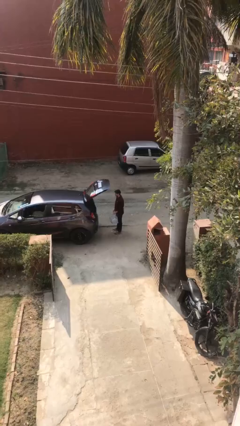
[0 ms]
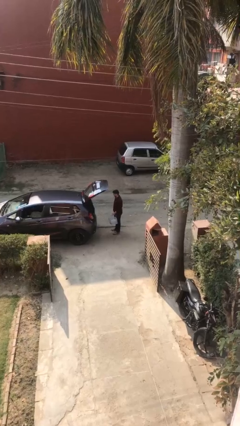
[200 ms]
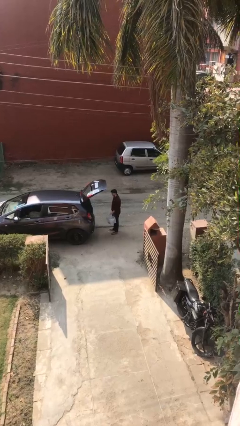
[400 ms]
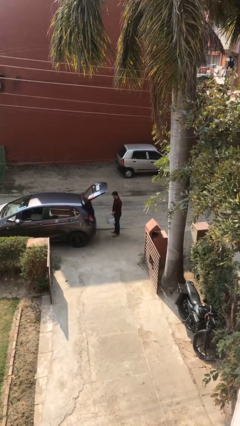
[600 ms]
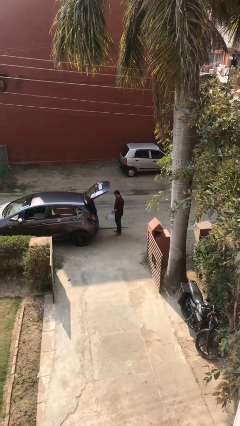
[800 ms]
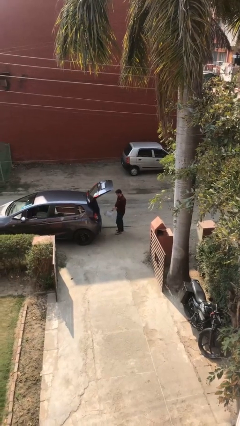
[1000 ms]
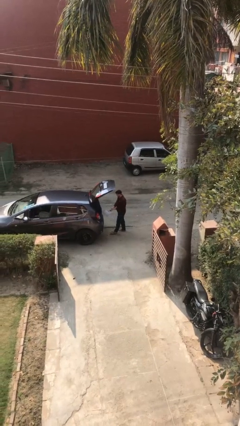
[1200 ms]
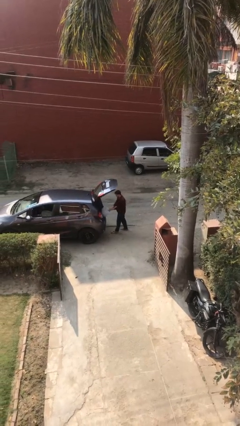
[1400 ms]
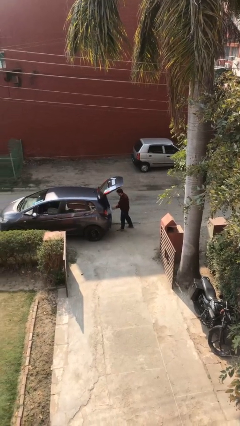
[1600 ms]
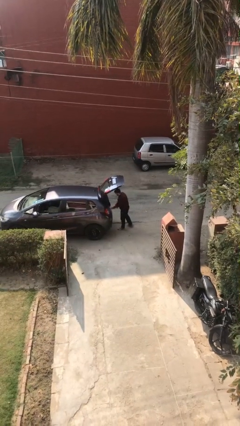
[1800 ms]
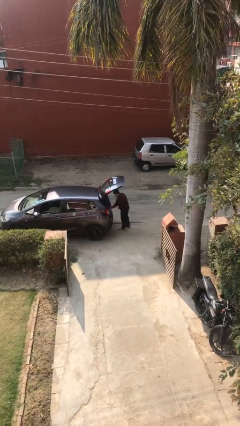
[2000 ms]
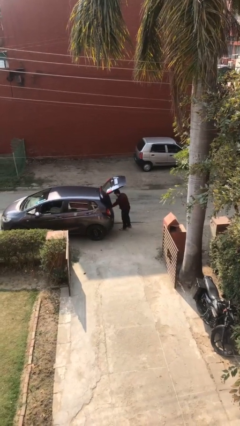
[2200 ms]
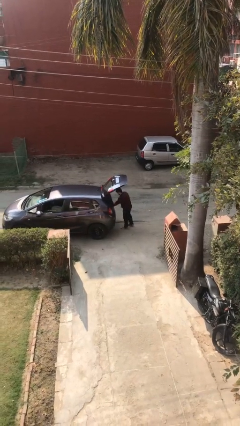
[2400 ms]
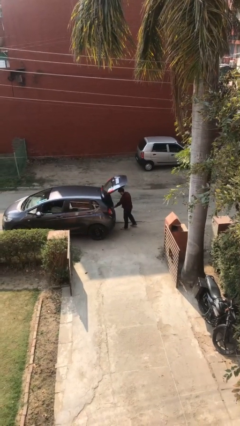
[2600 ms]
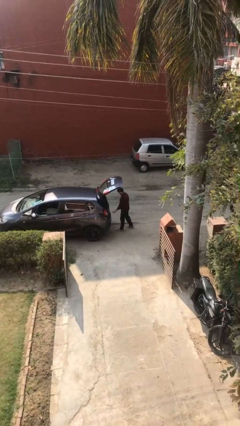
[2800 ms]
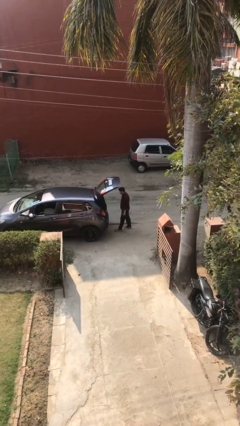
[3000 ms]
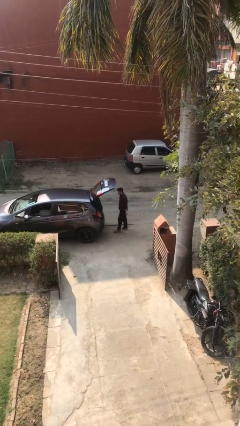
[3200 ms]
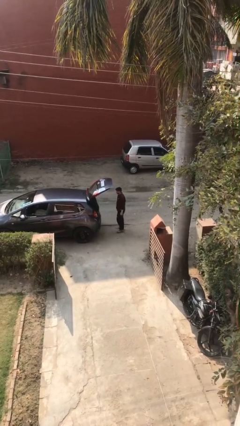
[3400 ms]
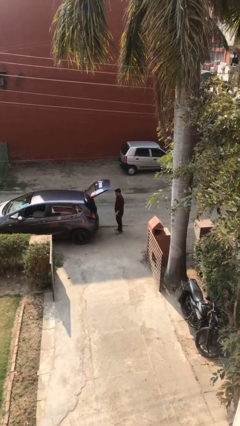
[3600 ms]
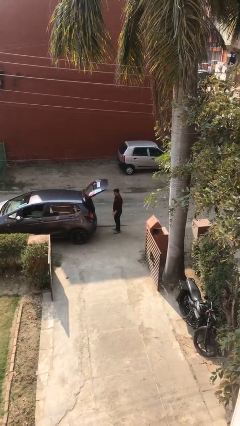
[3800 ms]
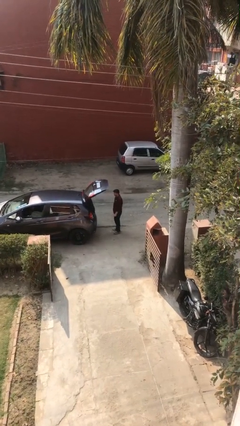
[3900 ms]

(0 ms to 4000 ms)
person loads car

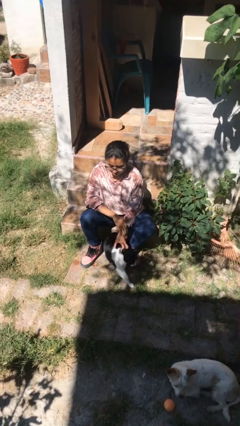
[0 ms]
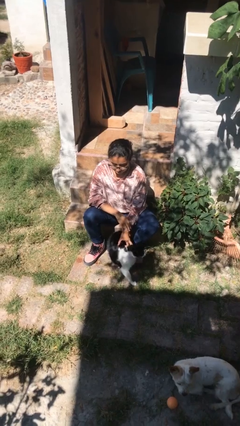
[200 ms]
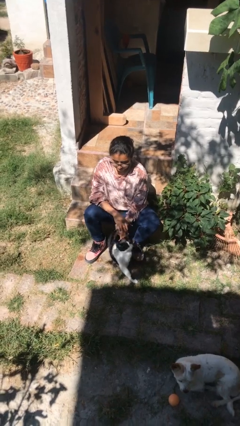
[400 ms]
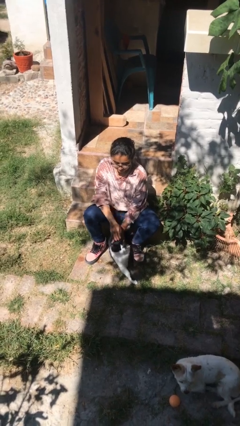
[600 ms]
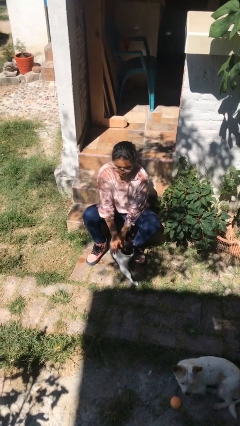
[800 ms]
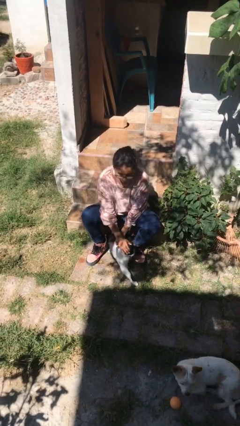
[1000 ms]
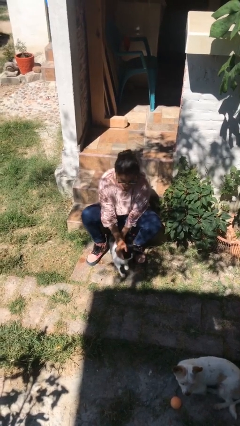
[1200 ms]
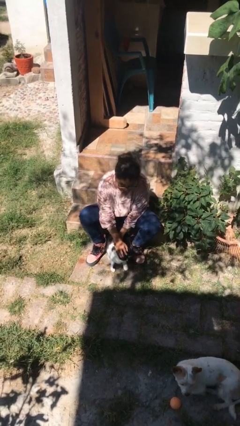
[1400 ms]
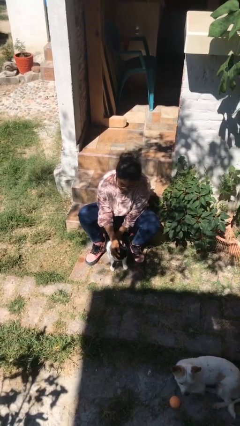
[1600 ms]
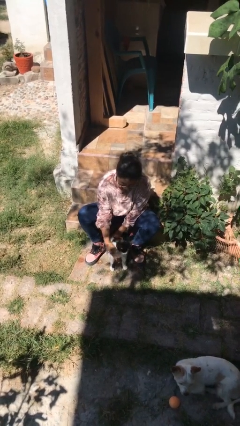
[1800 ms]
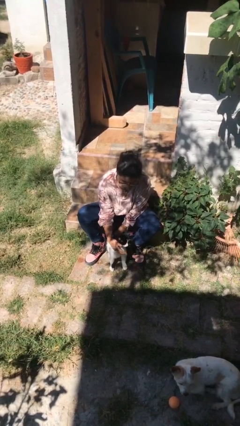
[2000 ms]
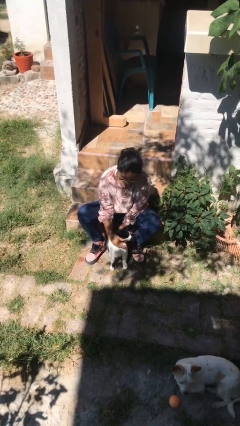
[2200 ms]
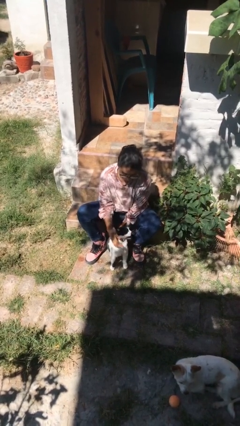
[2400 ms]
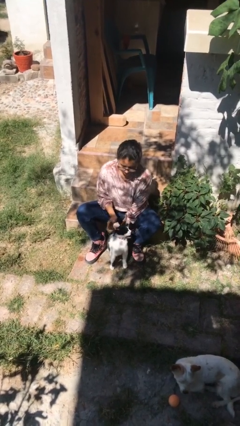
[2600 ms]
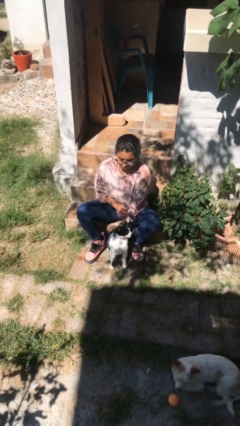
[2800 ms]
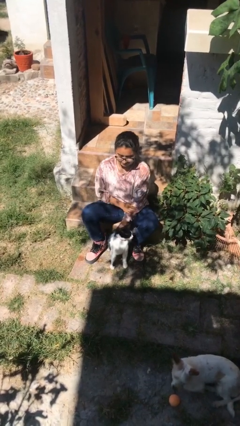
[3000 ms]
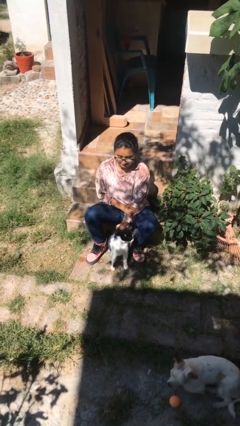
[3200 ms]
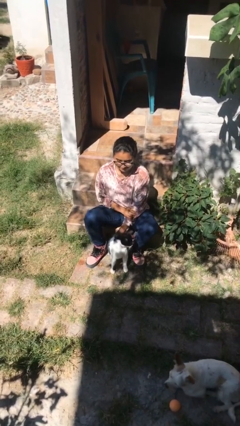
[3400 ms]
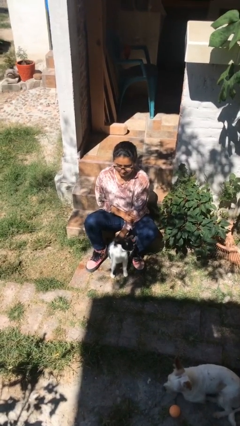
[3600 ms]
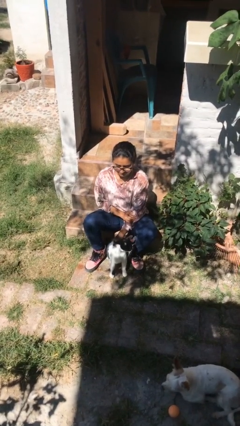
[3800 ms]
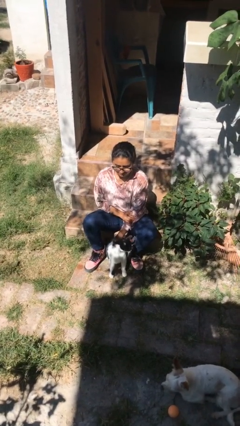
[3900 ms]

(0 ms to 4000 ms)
person pets cat

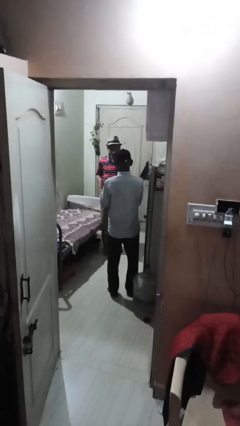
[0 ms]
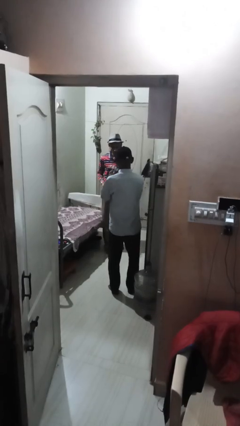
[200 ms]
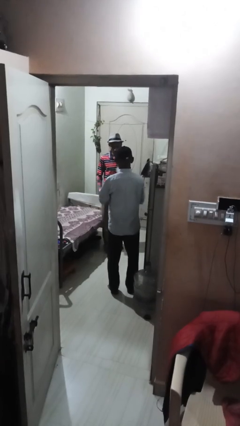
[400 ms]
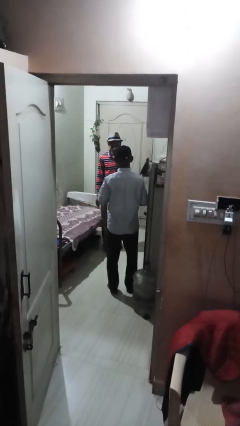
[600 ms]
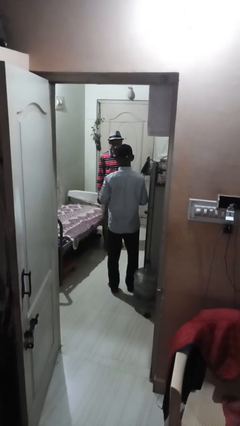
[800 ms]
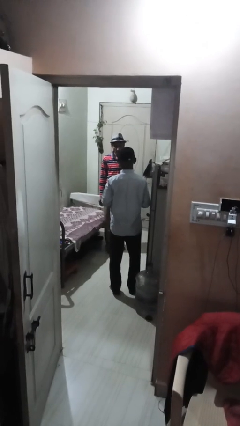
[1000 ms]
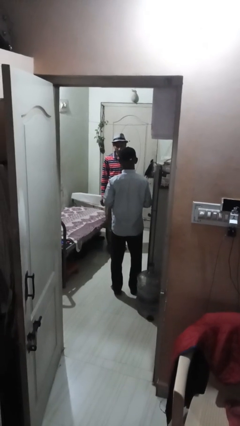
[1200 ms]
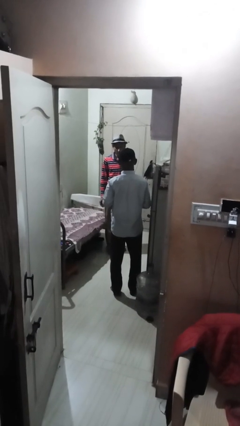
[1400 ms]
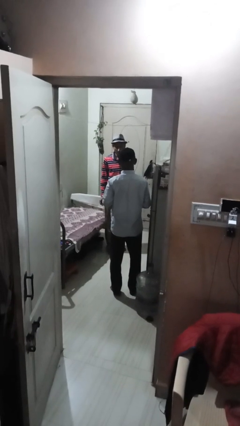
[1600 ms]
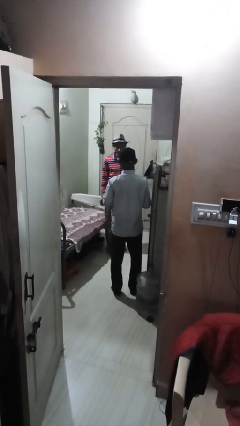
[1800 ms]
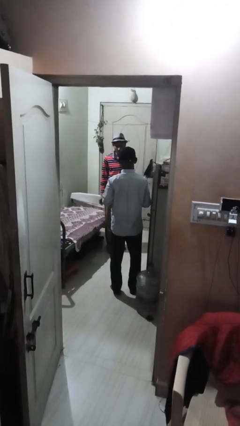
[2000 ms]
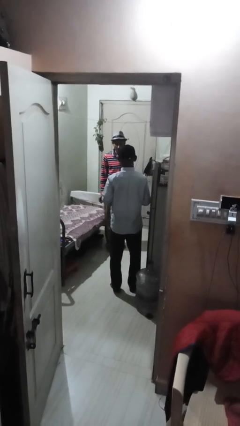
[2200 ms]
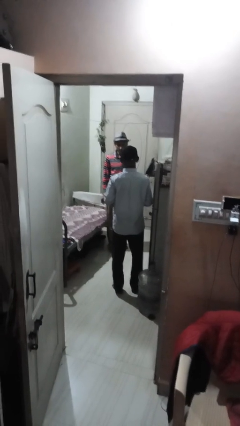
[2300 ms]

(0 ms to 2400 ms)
person catches object from person

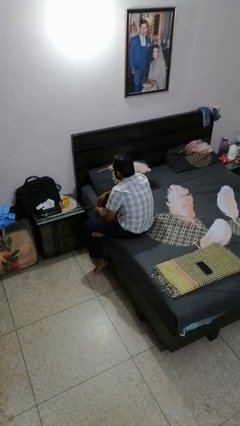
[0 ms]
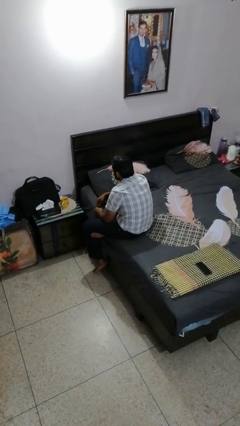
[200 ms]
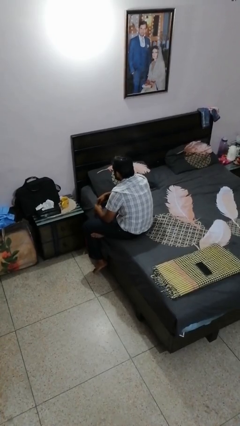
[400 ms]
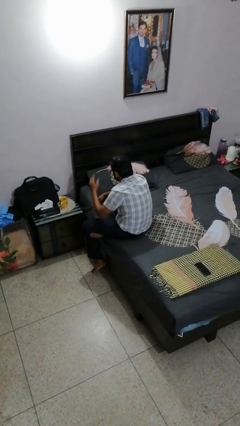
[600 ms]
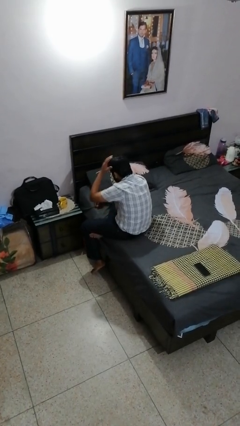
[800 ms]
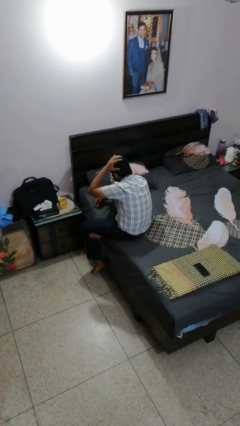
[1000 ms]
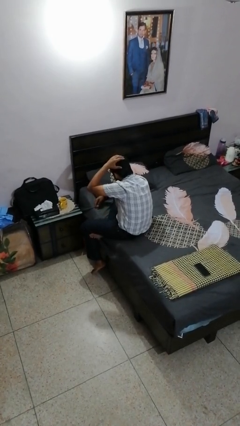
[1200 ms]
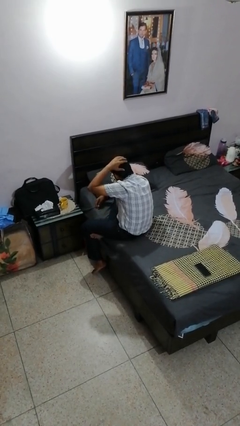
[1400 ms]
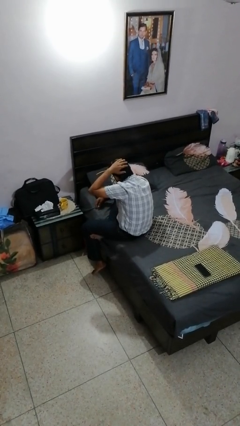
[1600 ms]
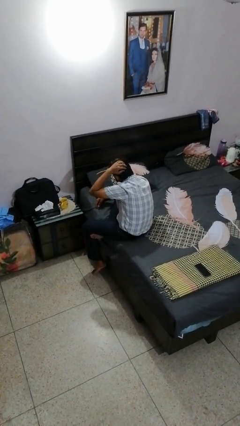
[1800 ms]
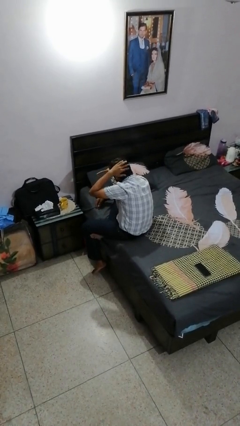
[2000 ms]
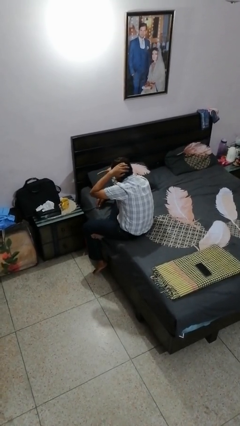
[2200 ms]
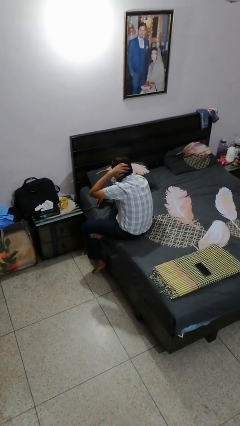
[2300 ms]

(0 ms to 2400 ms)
person strokes hair

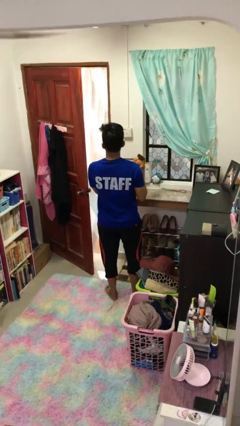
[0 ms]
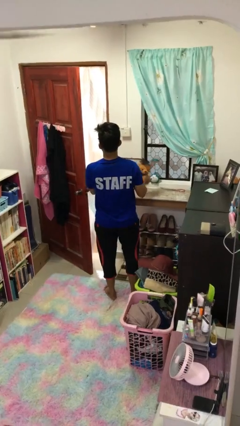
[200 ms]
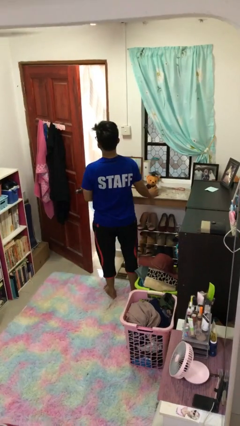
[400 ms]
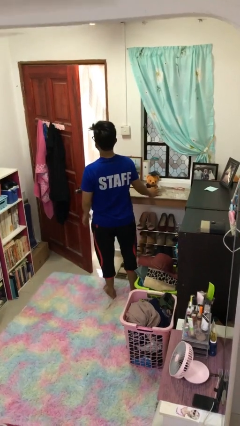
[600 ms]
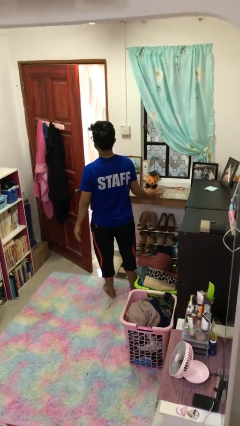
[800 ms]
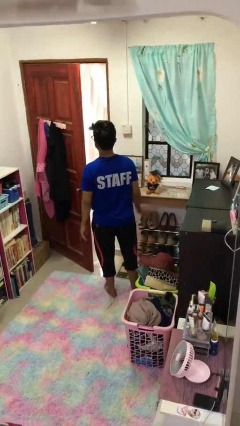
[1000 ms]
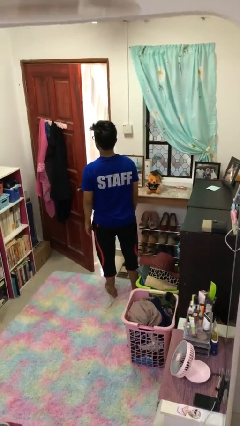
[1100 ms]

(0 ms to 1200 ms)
person puts down object on countertop

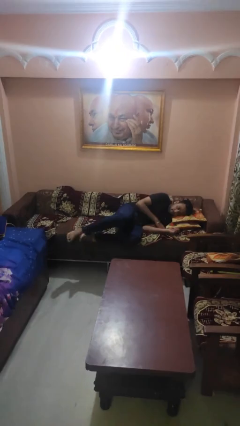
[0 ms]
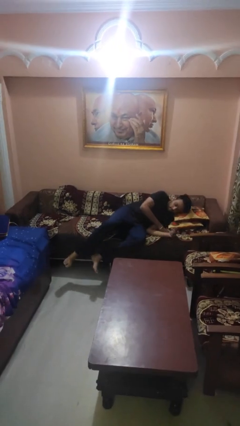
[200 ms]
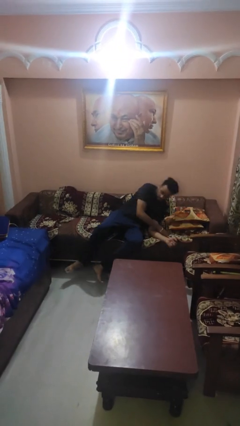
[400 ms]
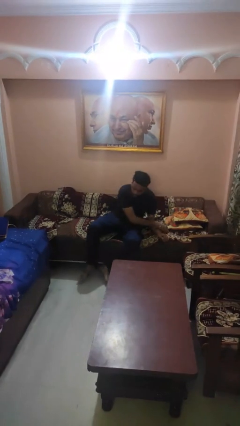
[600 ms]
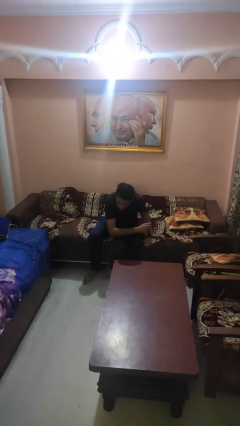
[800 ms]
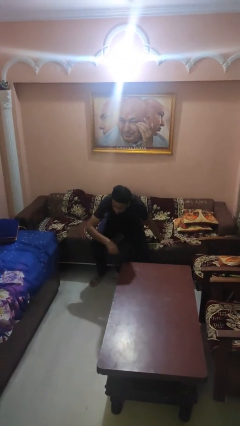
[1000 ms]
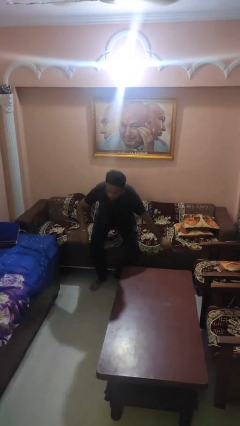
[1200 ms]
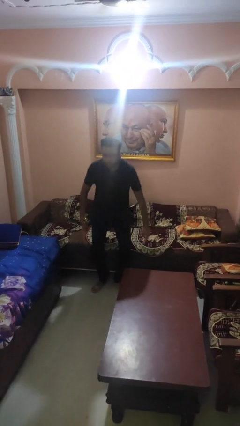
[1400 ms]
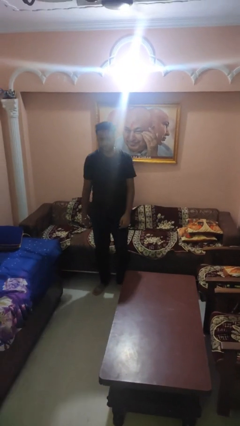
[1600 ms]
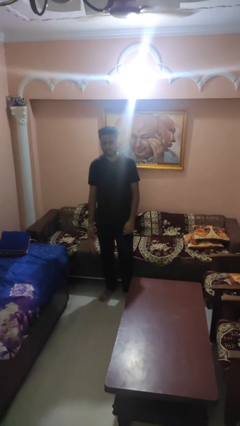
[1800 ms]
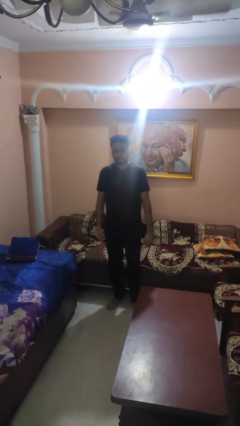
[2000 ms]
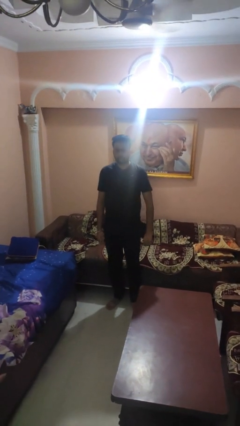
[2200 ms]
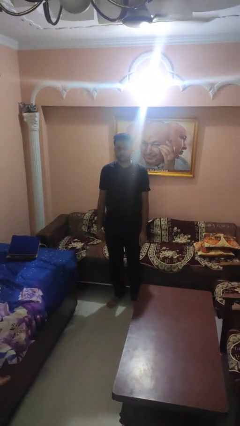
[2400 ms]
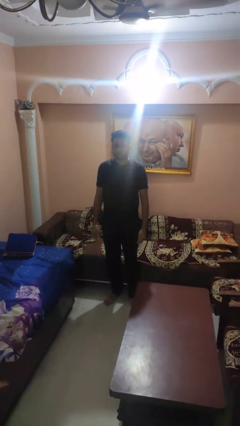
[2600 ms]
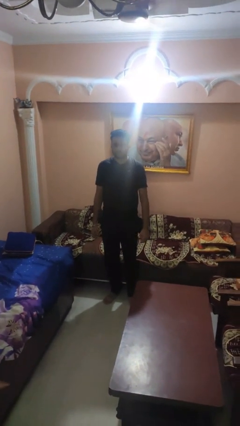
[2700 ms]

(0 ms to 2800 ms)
person stands up

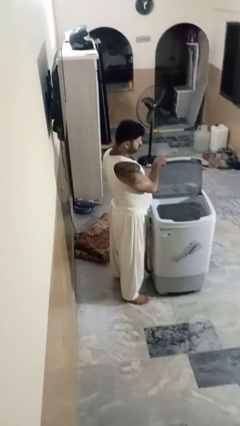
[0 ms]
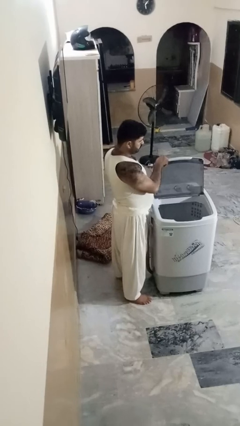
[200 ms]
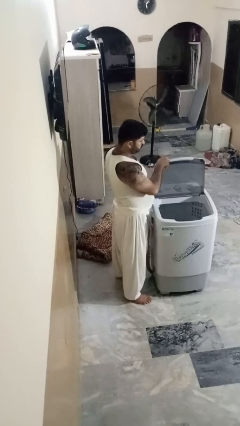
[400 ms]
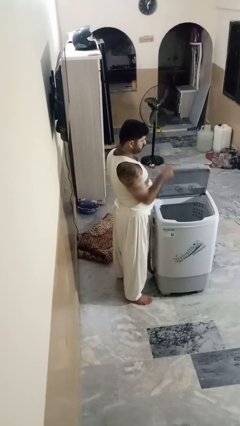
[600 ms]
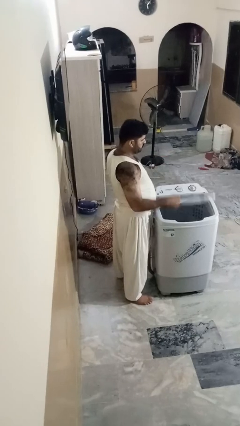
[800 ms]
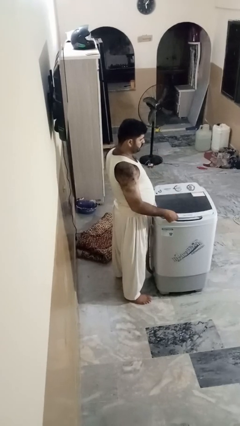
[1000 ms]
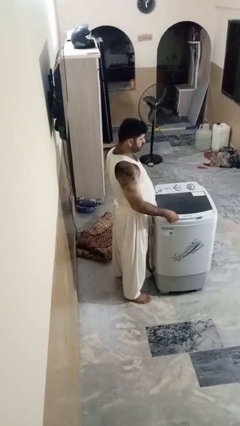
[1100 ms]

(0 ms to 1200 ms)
person closes clothes washer
